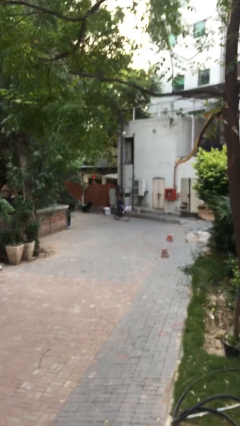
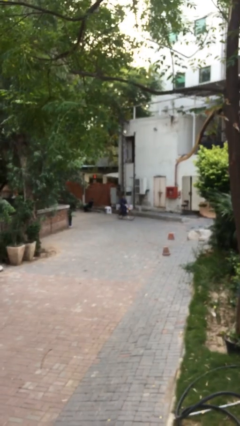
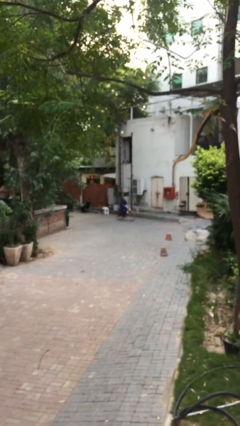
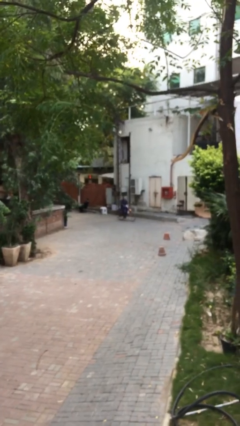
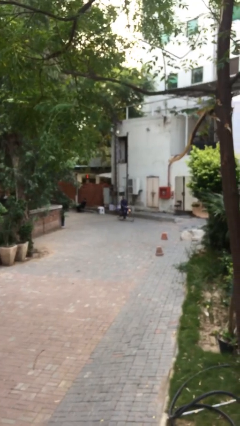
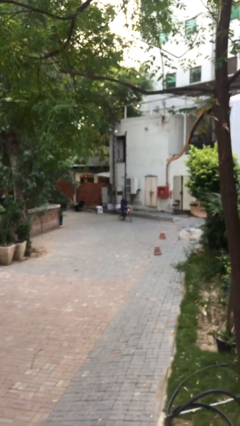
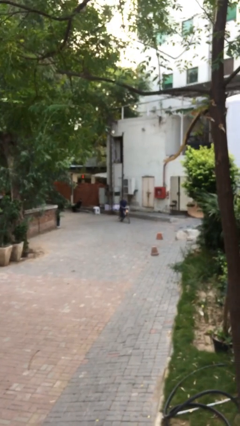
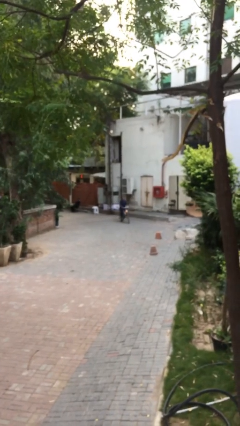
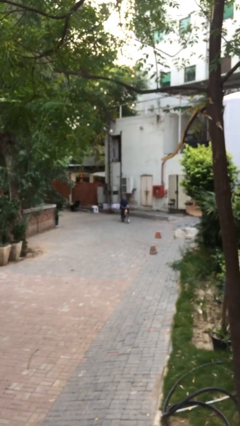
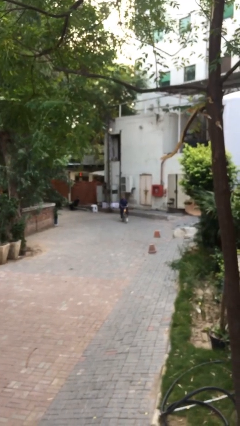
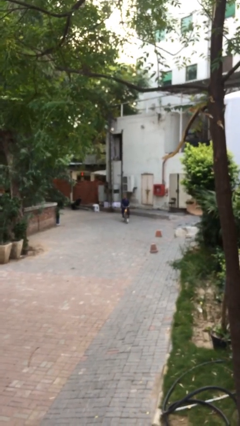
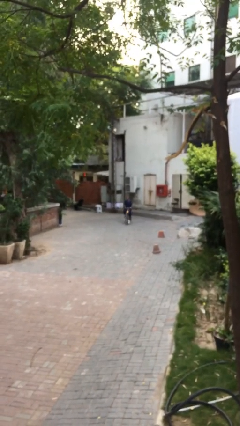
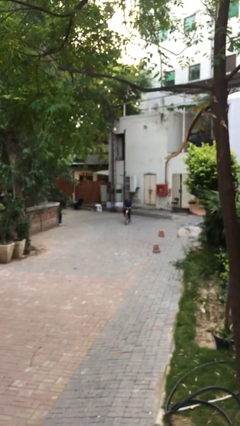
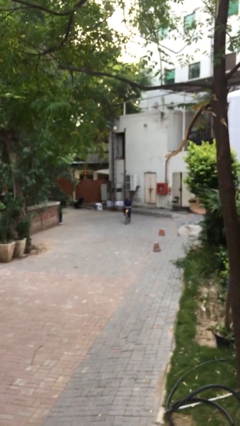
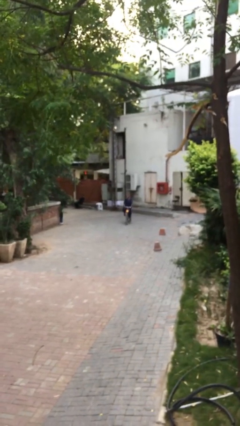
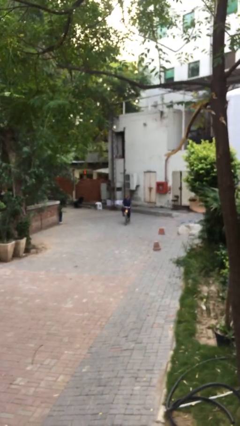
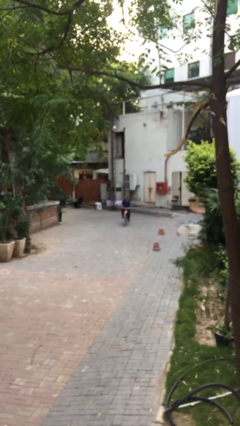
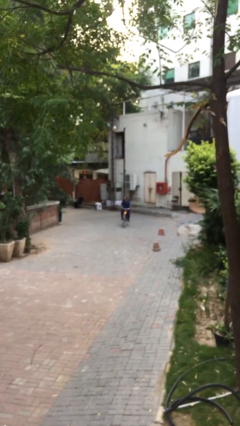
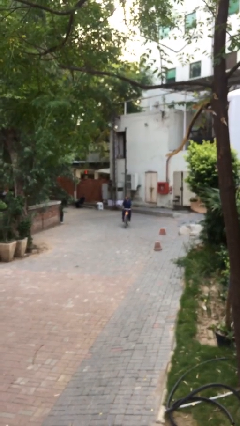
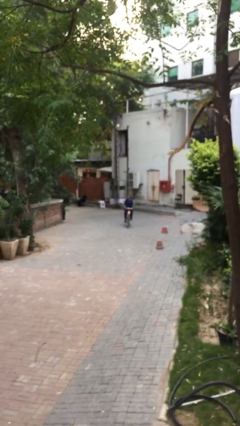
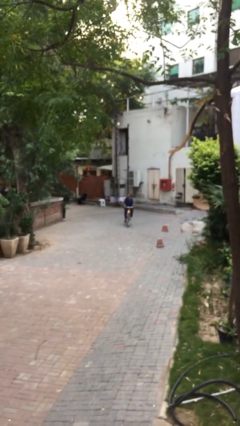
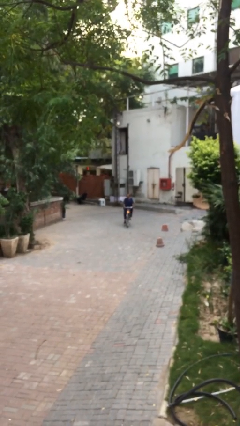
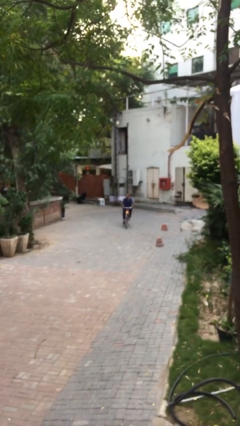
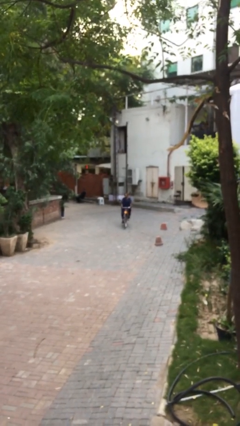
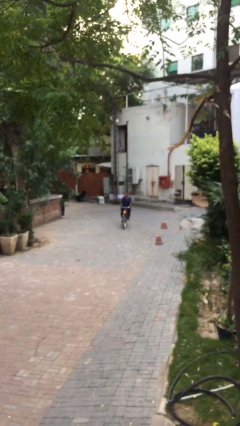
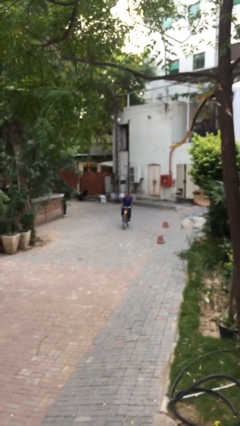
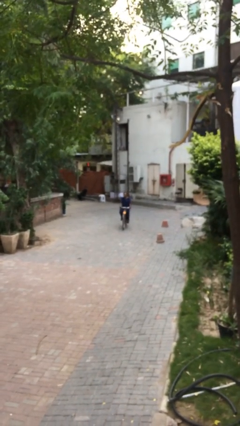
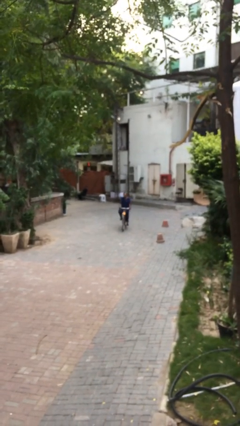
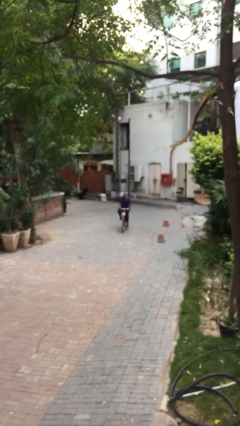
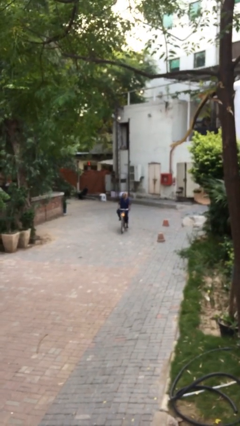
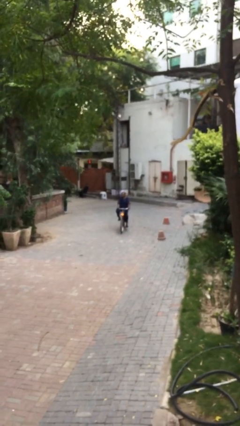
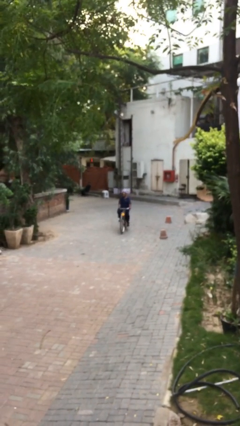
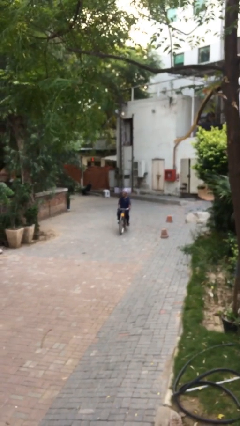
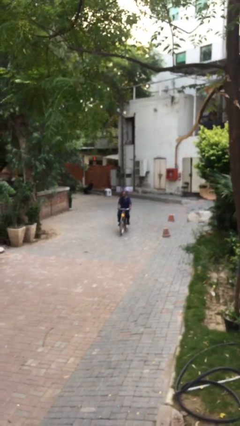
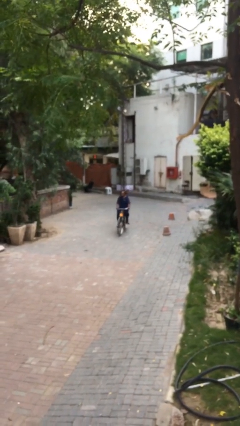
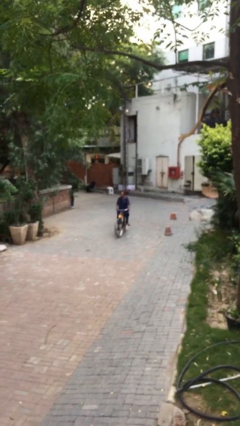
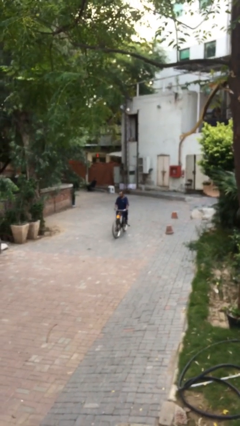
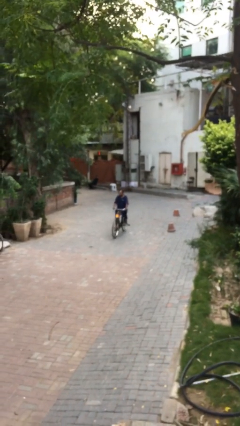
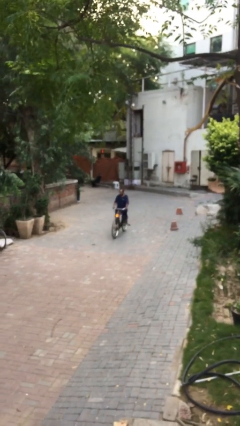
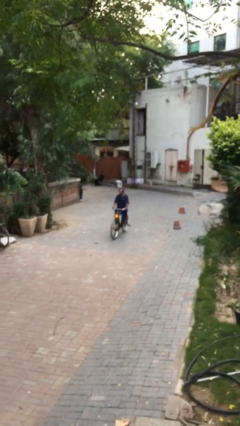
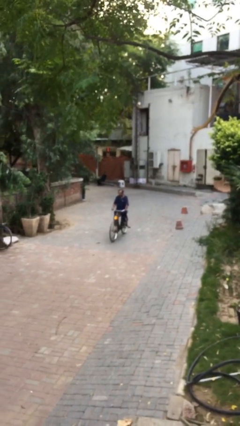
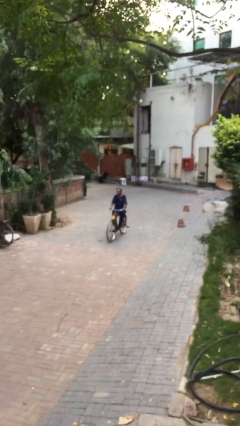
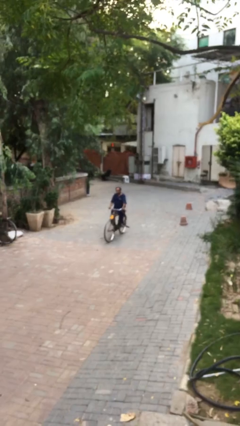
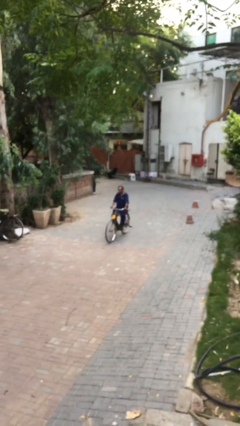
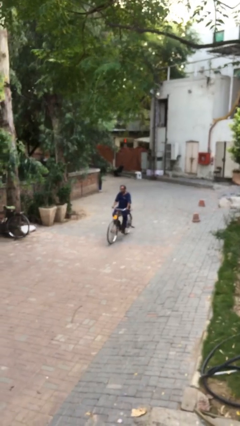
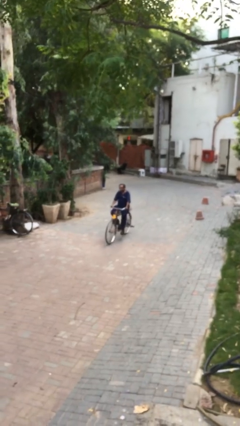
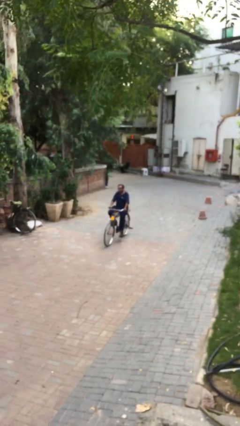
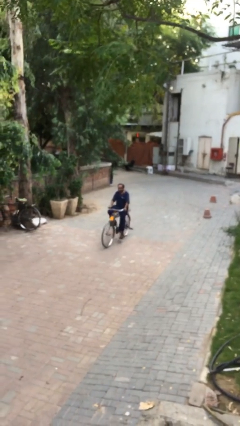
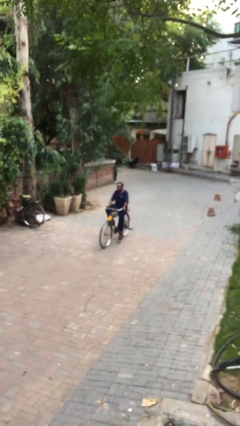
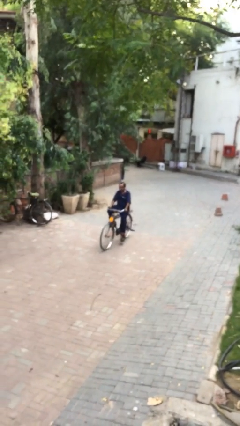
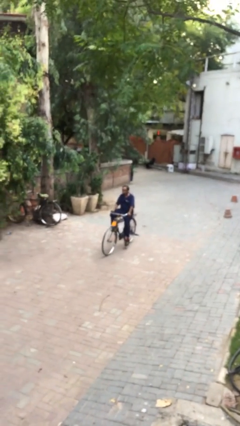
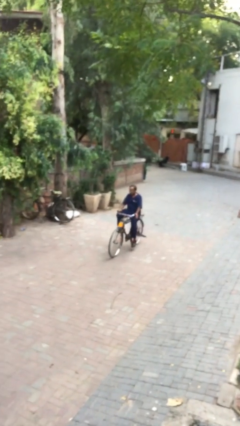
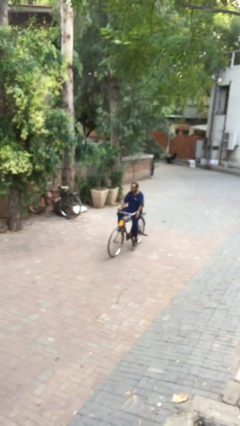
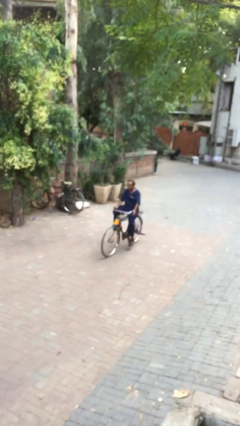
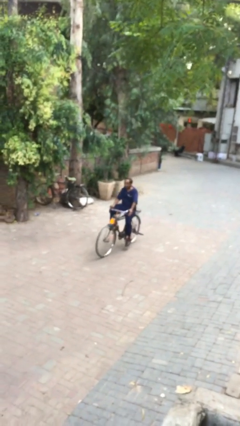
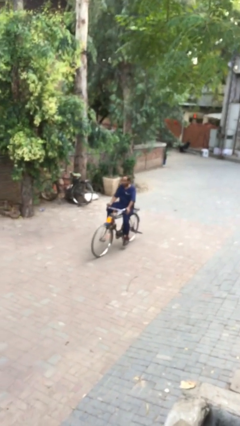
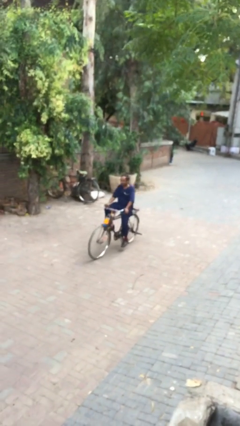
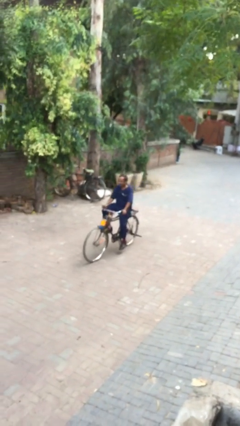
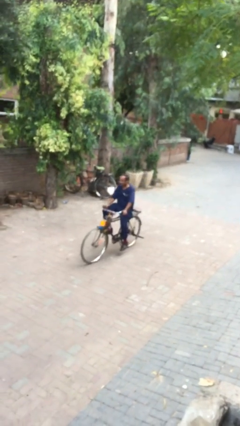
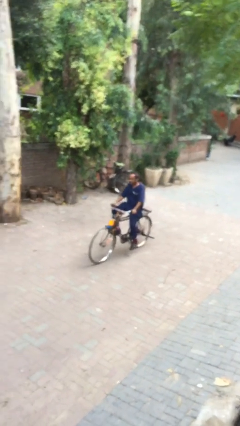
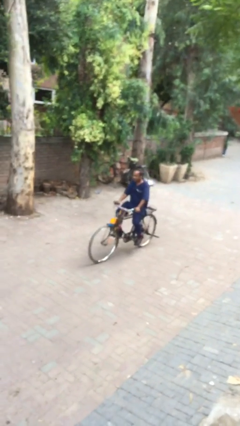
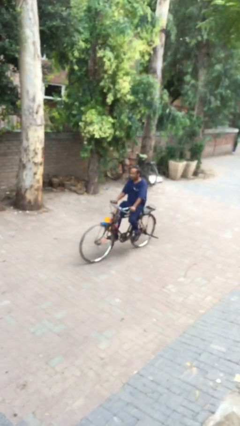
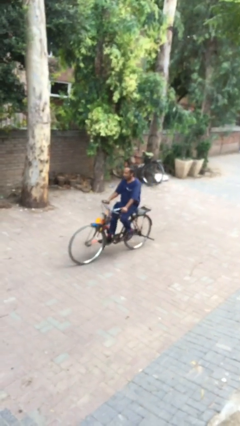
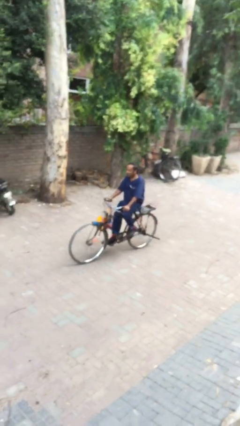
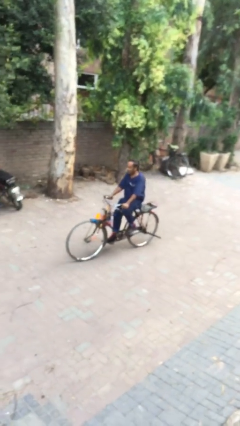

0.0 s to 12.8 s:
person rides bicycle

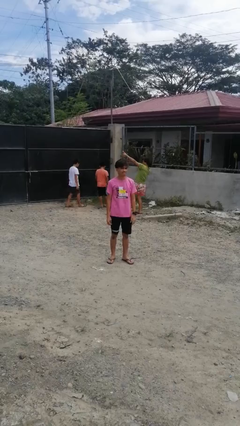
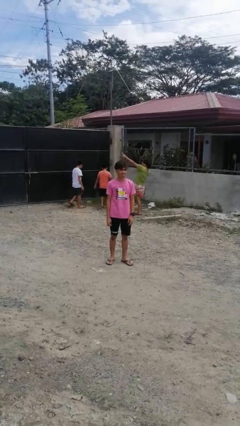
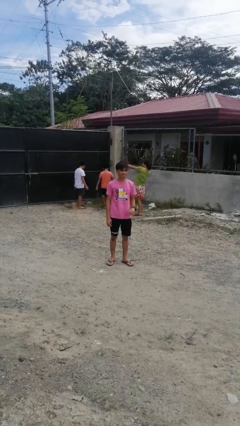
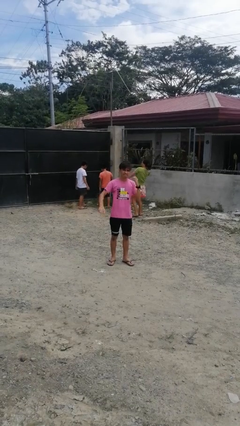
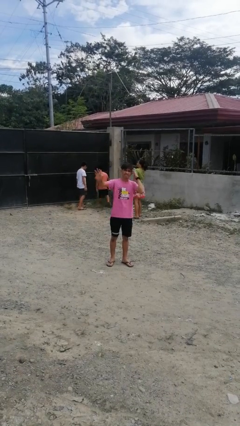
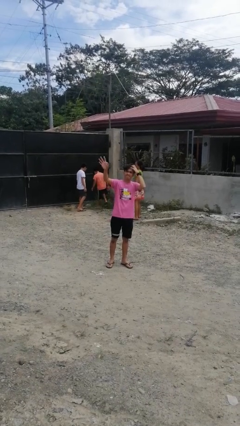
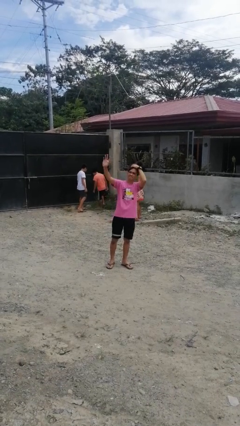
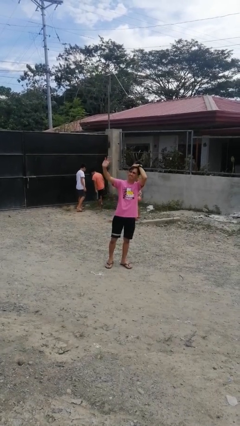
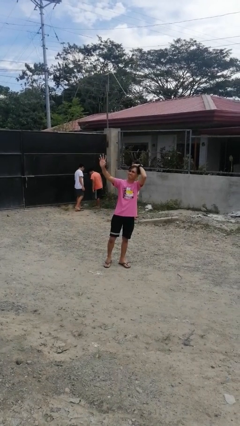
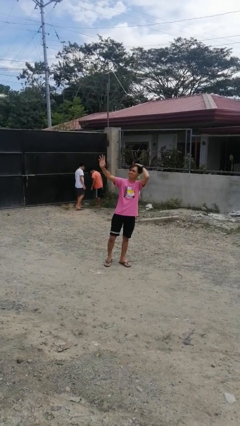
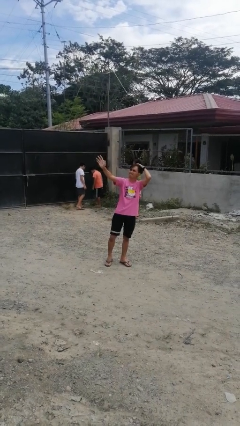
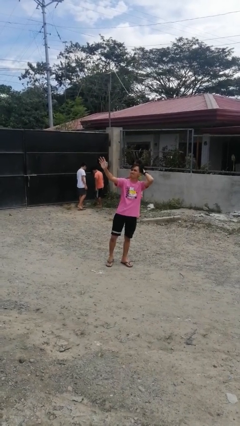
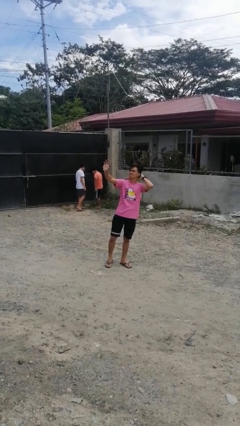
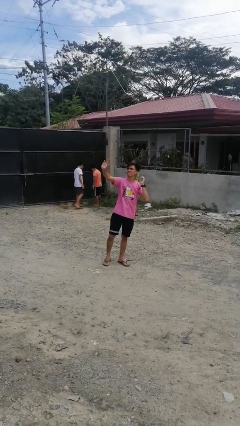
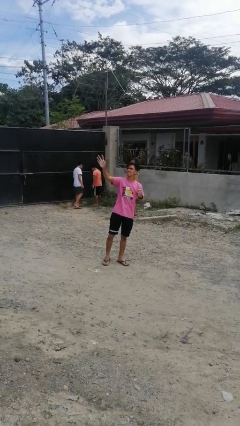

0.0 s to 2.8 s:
person waves at person

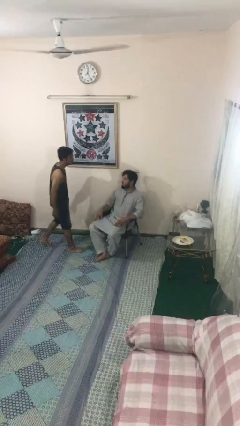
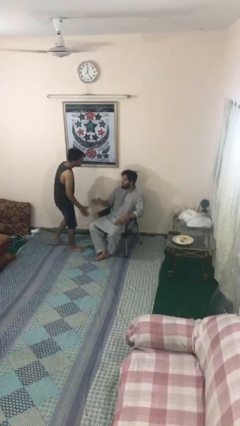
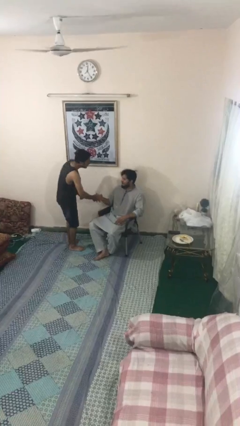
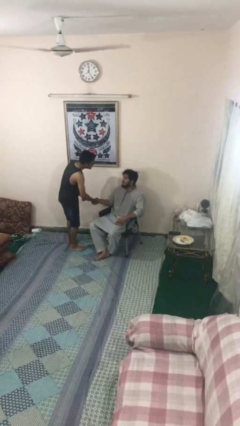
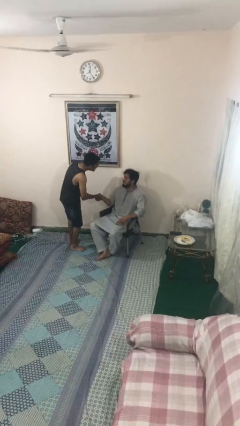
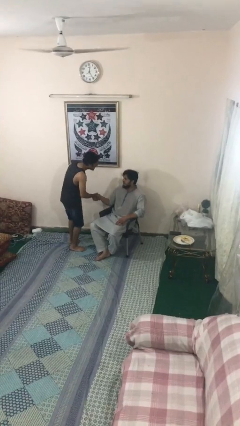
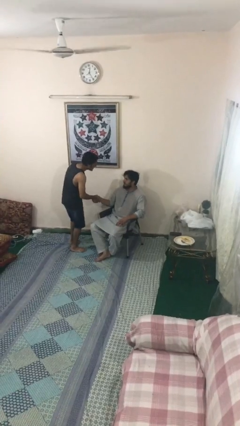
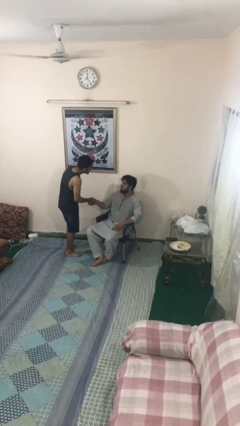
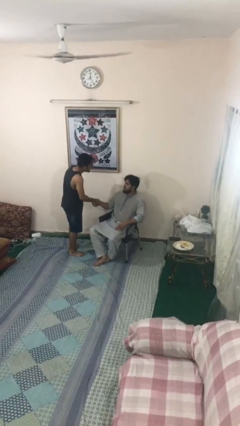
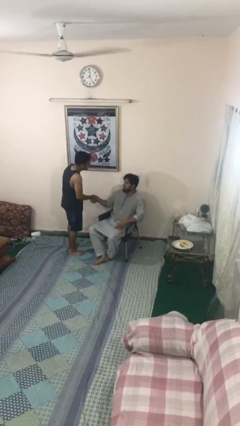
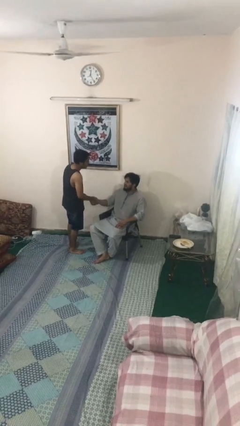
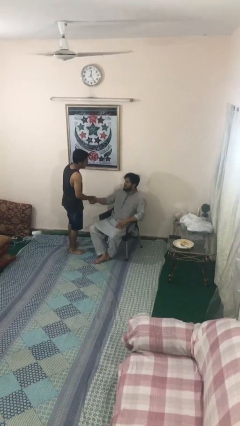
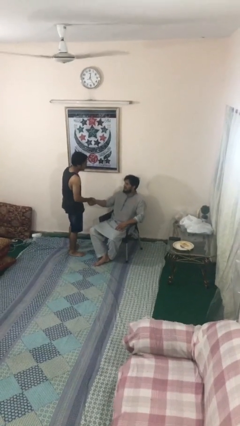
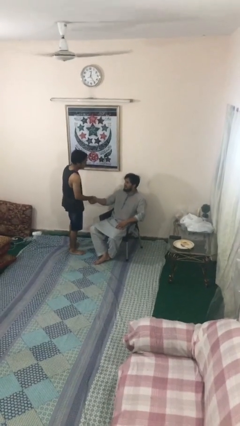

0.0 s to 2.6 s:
person shakes hand

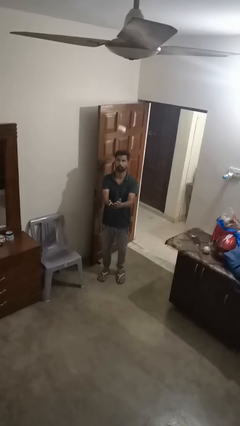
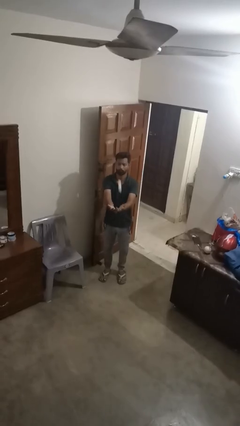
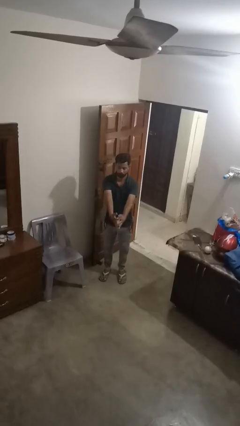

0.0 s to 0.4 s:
person catches dropped object
